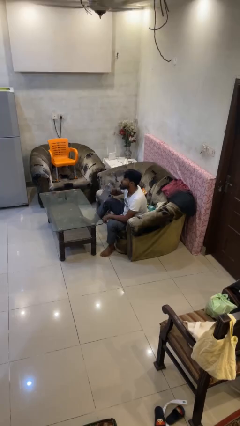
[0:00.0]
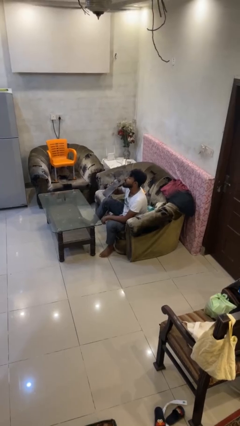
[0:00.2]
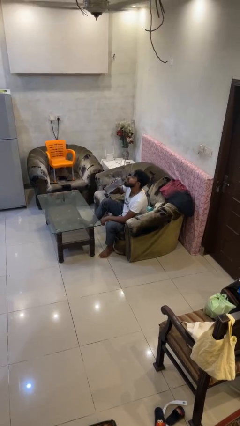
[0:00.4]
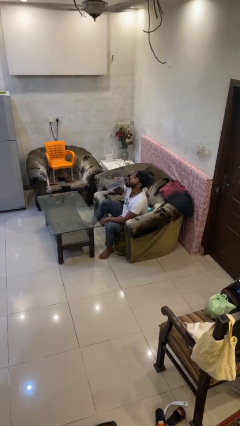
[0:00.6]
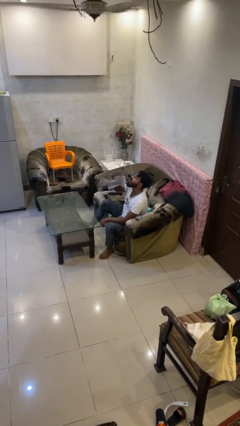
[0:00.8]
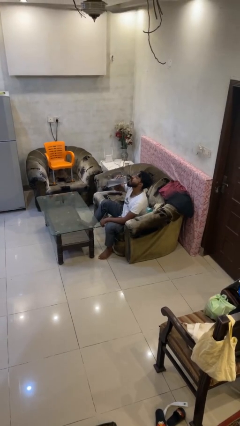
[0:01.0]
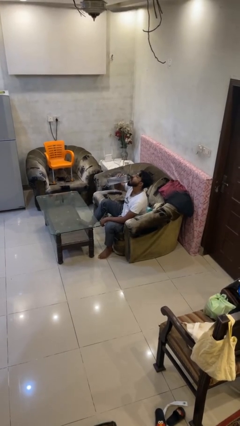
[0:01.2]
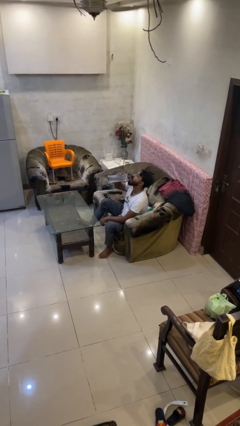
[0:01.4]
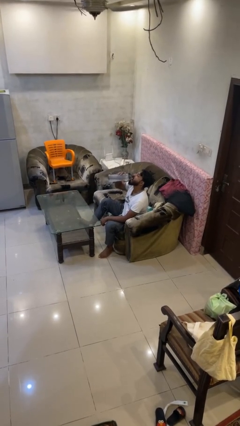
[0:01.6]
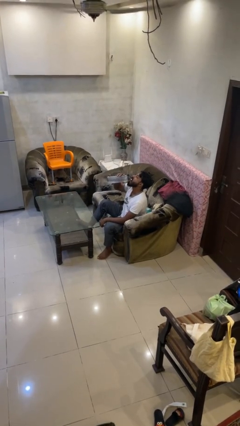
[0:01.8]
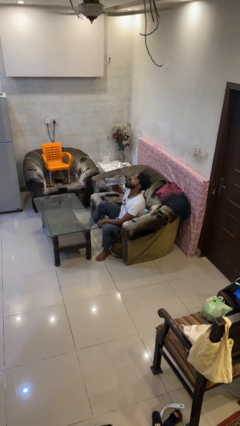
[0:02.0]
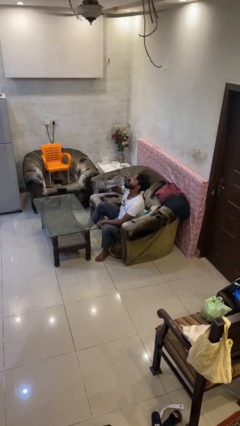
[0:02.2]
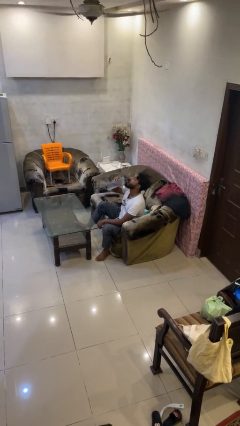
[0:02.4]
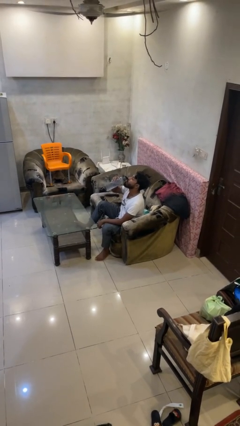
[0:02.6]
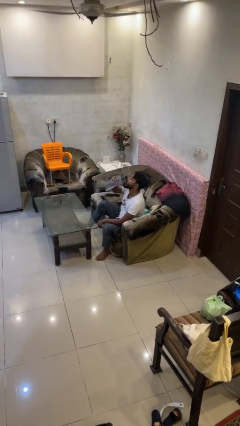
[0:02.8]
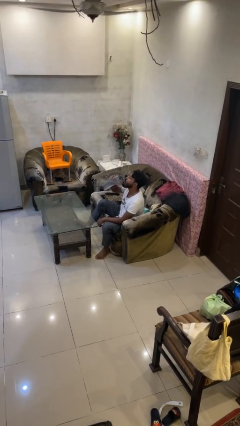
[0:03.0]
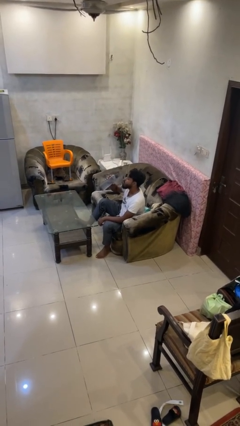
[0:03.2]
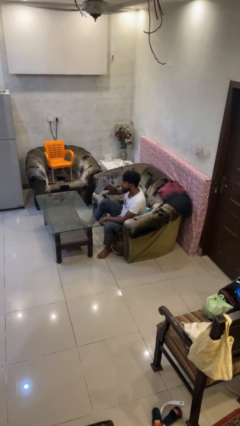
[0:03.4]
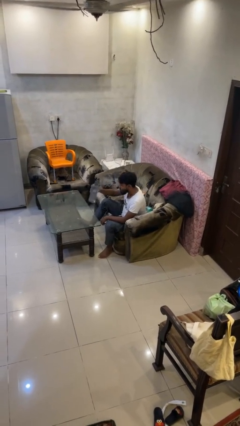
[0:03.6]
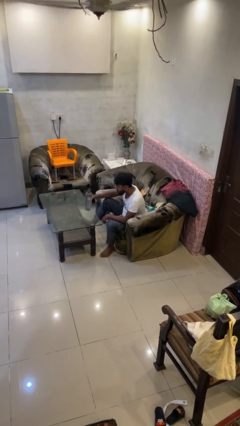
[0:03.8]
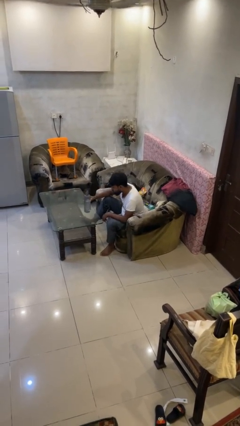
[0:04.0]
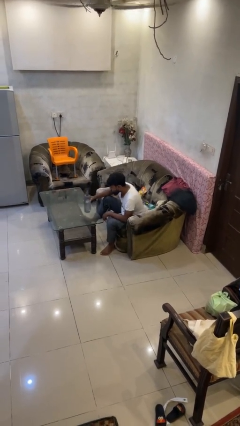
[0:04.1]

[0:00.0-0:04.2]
person drinks from bottle

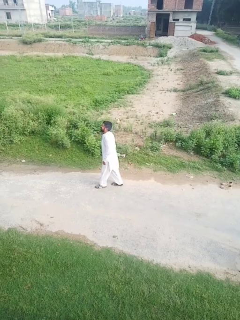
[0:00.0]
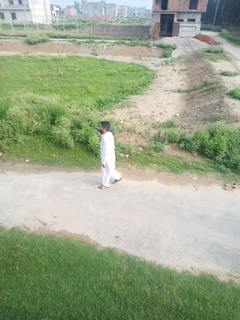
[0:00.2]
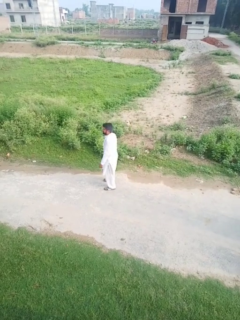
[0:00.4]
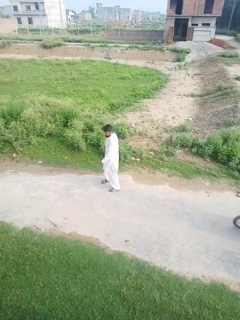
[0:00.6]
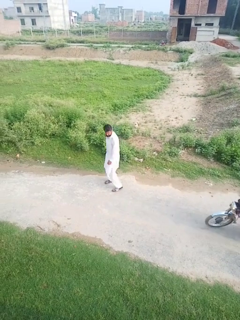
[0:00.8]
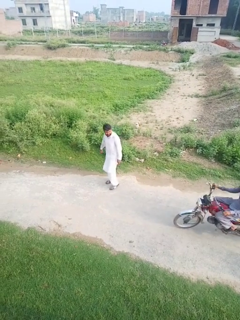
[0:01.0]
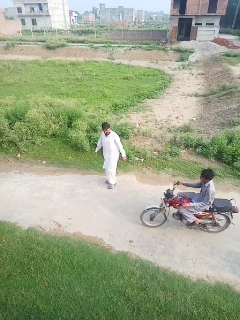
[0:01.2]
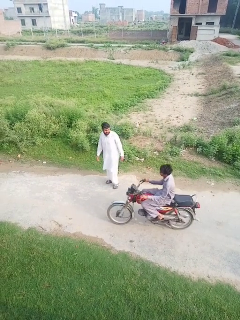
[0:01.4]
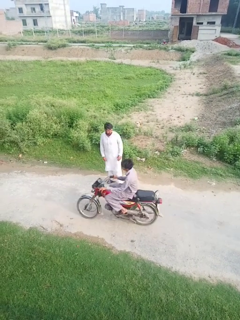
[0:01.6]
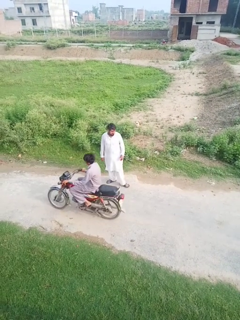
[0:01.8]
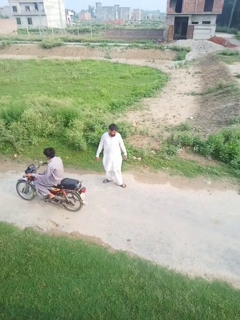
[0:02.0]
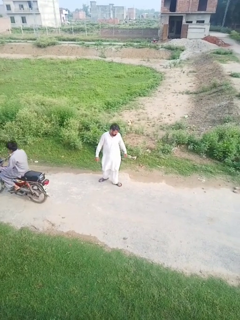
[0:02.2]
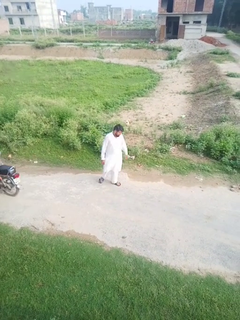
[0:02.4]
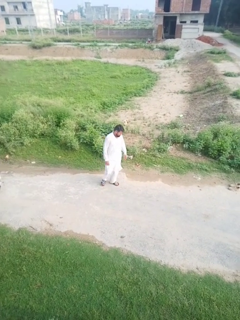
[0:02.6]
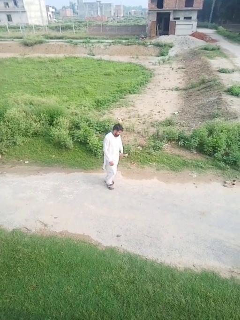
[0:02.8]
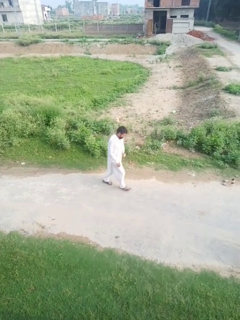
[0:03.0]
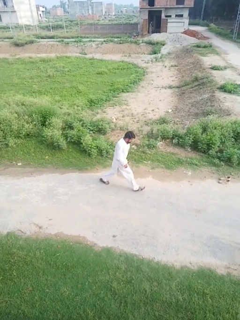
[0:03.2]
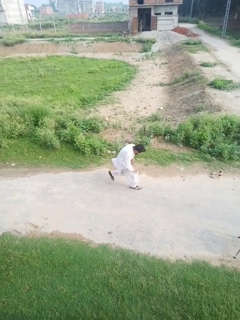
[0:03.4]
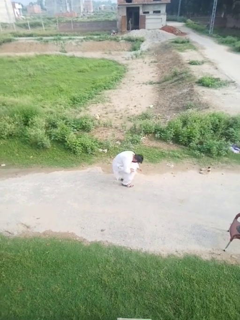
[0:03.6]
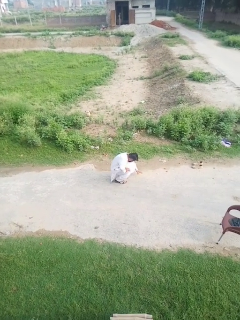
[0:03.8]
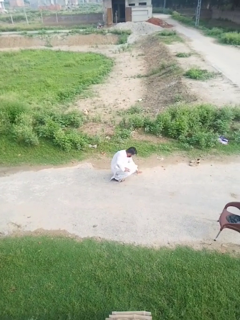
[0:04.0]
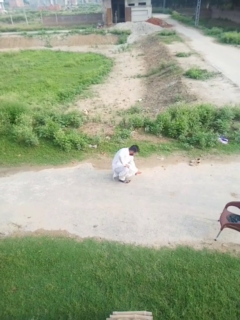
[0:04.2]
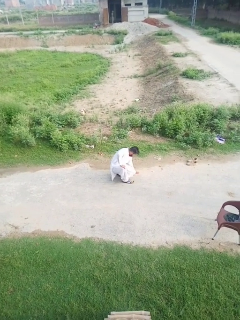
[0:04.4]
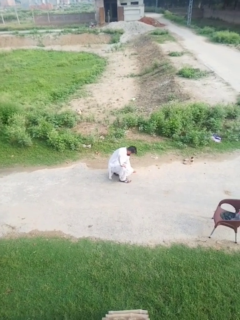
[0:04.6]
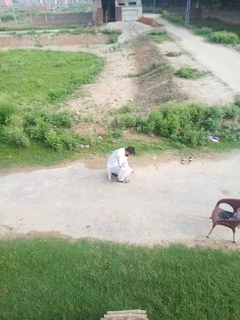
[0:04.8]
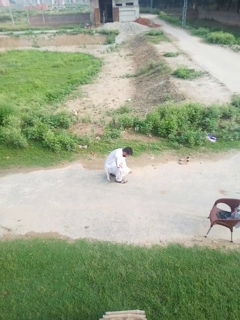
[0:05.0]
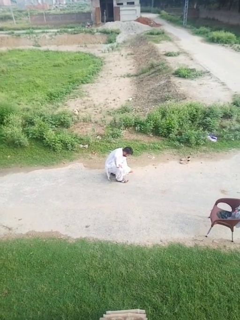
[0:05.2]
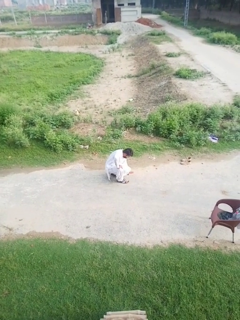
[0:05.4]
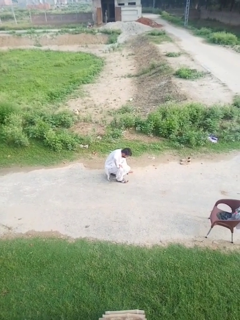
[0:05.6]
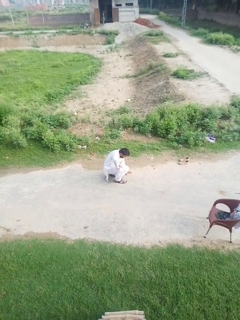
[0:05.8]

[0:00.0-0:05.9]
person trips on object on floor

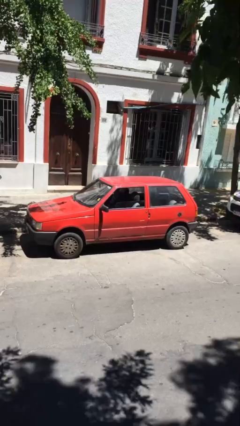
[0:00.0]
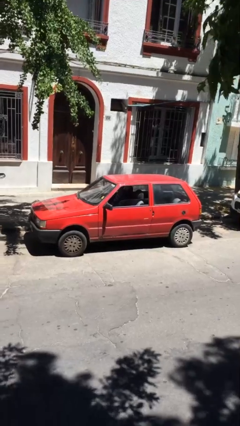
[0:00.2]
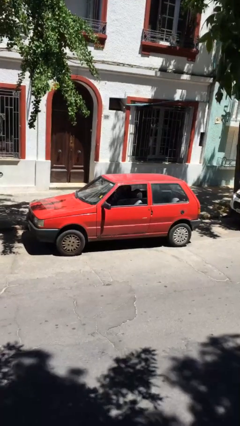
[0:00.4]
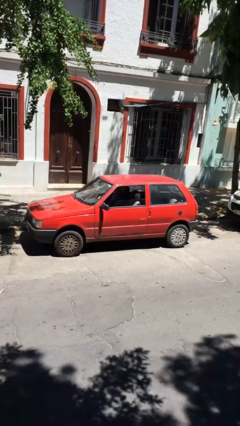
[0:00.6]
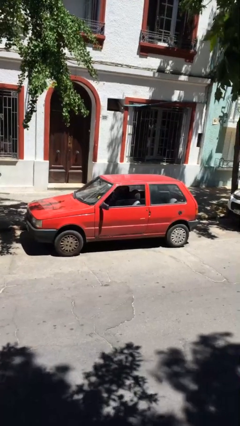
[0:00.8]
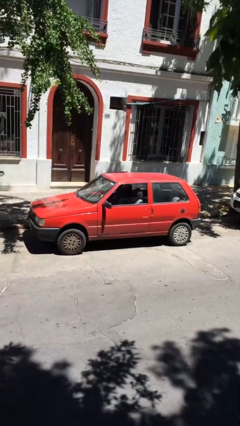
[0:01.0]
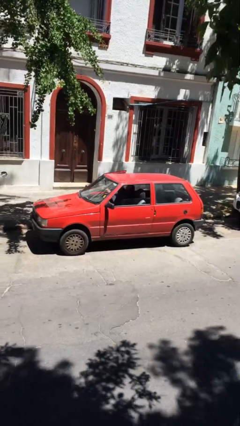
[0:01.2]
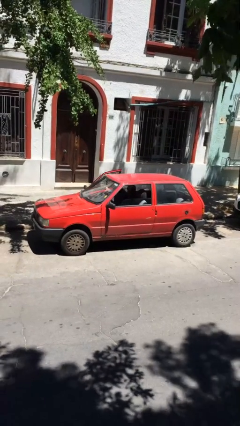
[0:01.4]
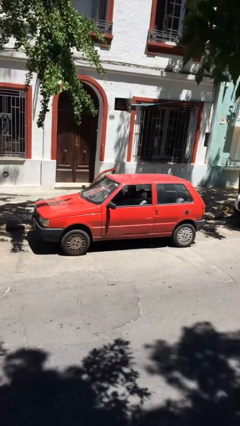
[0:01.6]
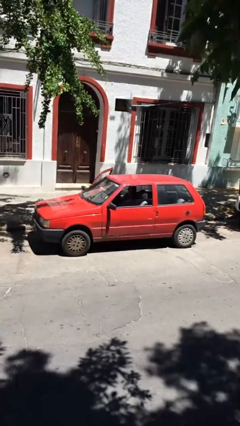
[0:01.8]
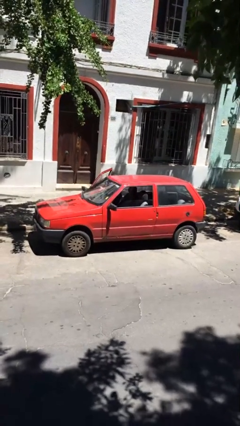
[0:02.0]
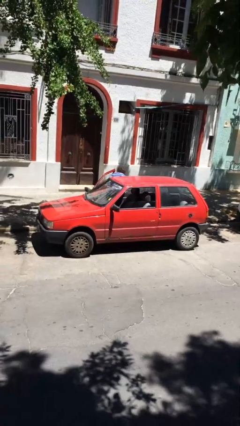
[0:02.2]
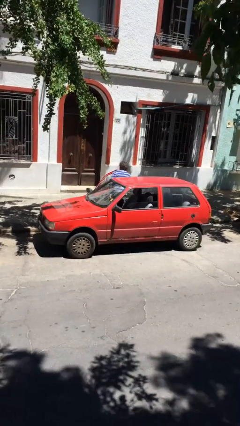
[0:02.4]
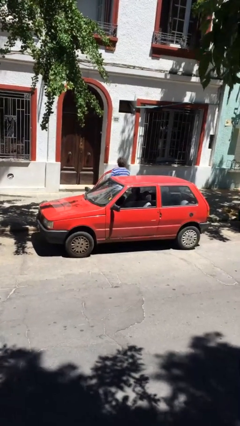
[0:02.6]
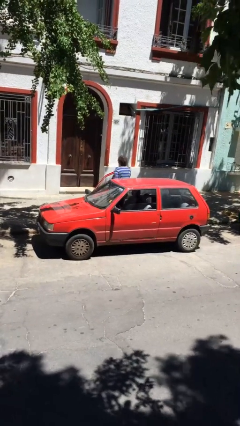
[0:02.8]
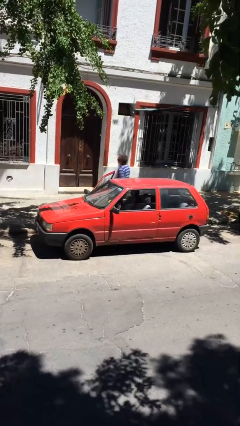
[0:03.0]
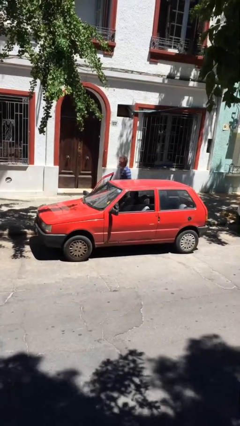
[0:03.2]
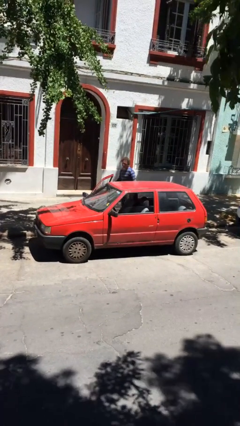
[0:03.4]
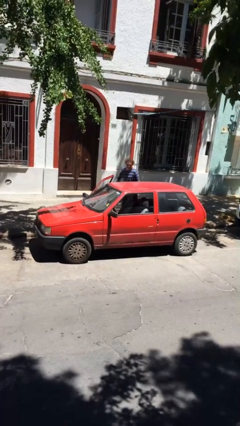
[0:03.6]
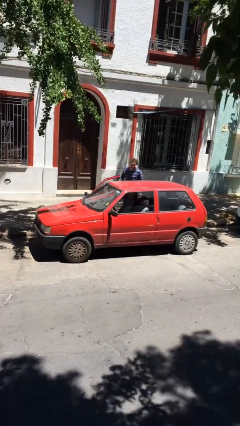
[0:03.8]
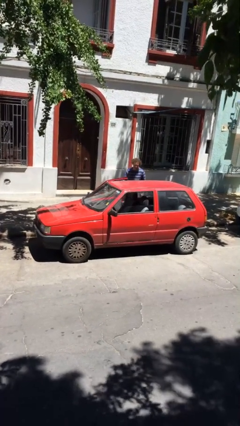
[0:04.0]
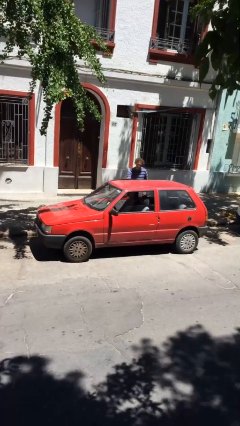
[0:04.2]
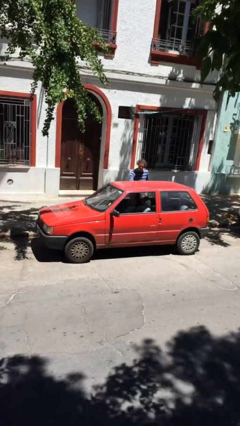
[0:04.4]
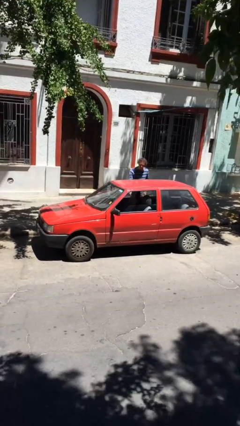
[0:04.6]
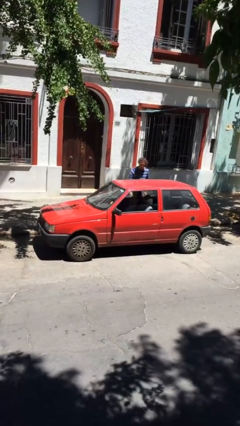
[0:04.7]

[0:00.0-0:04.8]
car drops off person

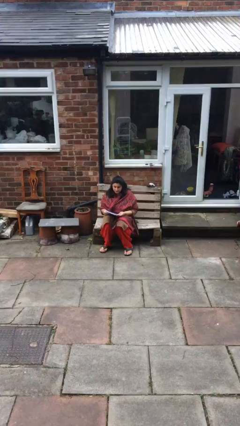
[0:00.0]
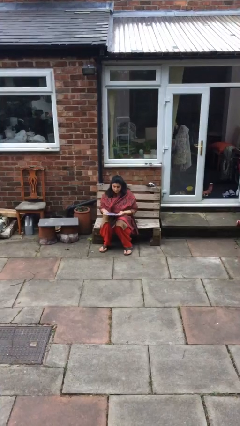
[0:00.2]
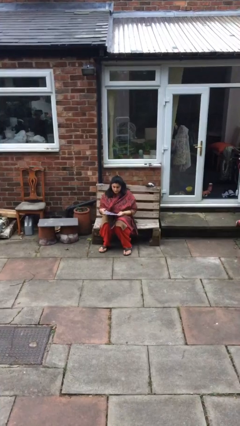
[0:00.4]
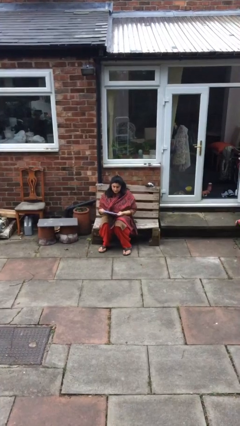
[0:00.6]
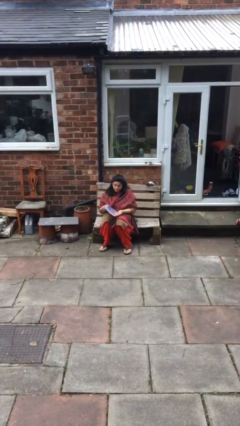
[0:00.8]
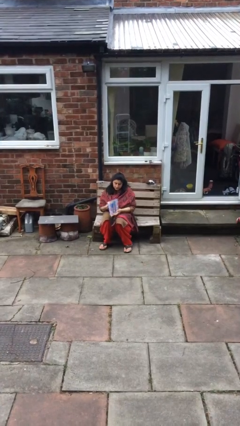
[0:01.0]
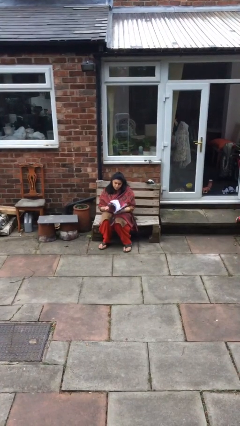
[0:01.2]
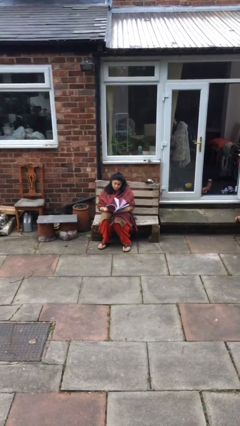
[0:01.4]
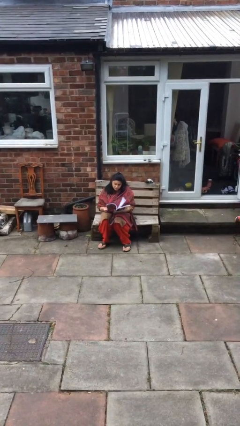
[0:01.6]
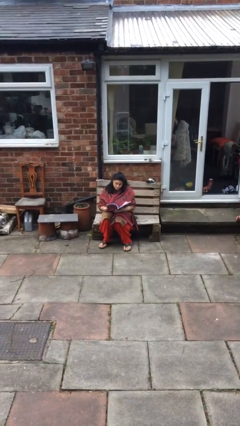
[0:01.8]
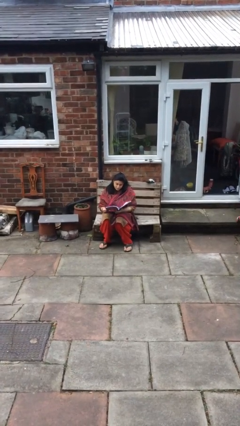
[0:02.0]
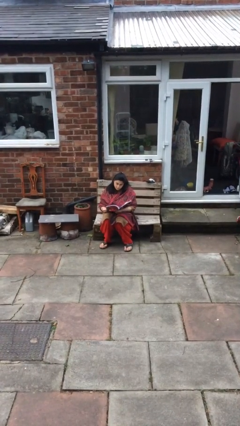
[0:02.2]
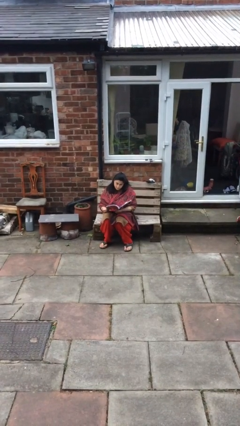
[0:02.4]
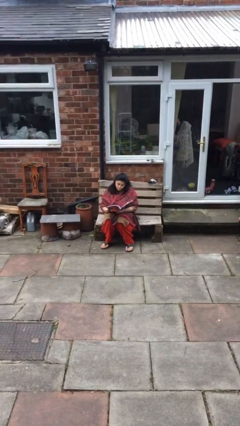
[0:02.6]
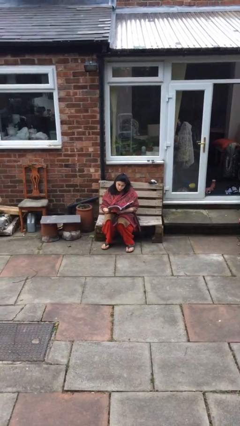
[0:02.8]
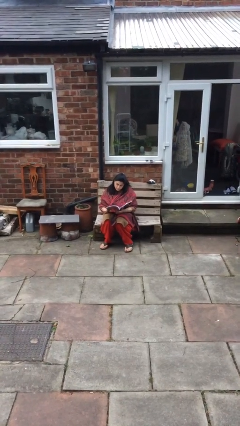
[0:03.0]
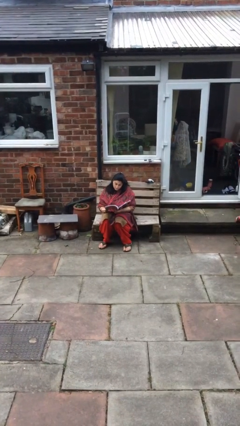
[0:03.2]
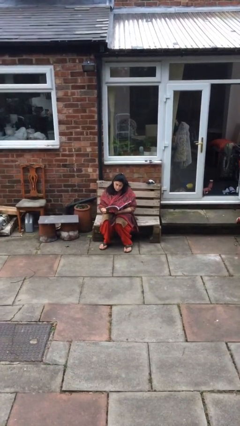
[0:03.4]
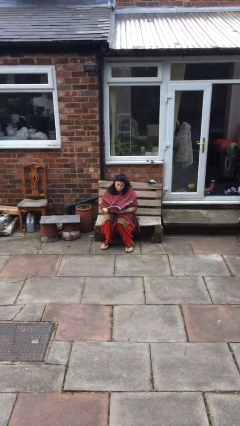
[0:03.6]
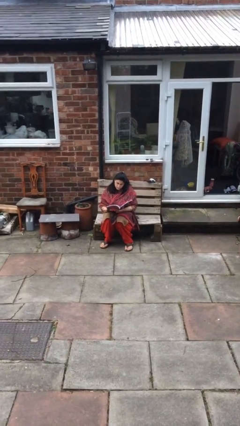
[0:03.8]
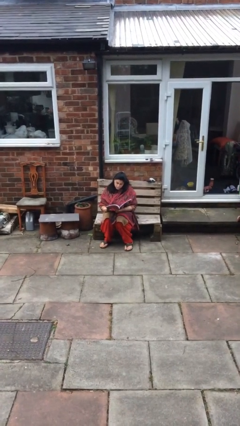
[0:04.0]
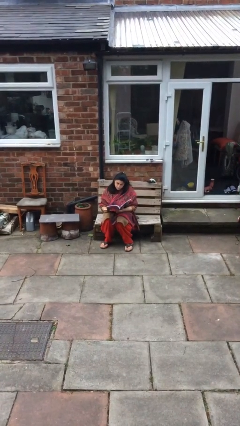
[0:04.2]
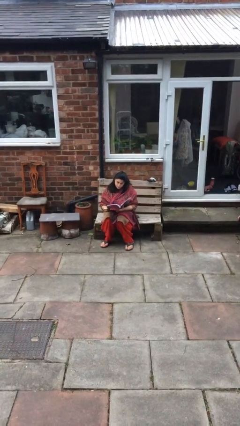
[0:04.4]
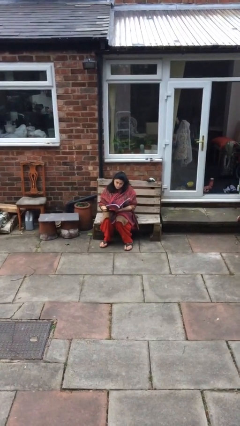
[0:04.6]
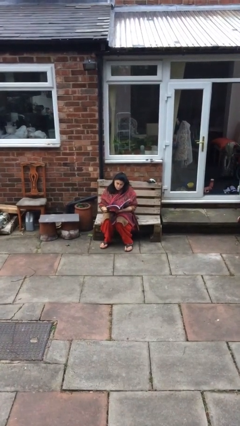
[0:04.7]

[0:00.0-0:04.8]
person reads document
